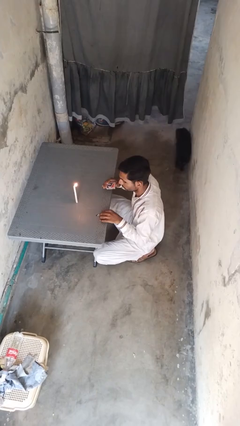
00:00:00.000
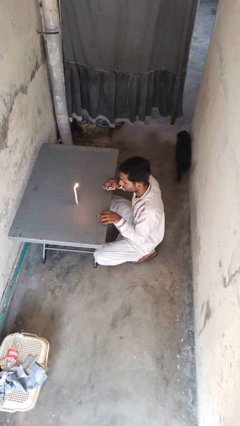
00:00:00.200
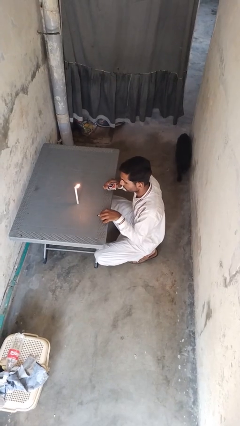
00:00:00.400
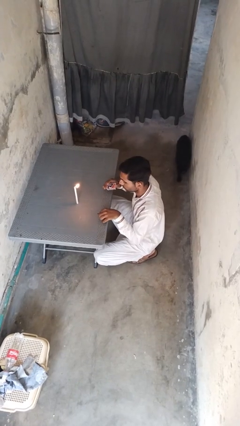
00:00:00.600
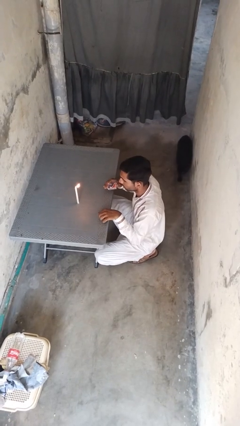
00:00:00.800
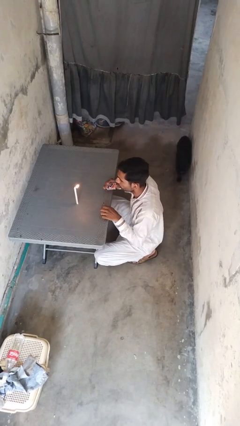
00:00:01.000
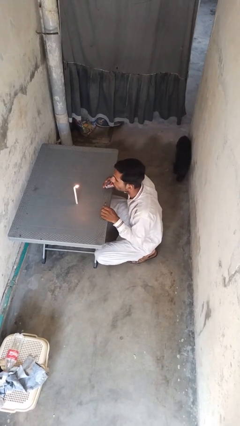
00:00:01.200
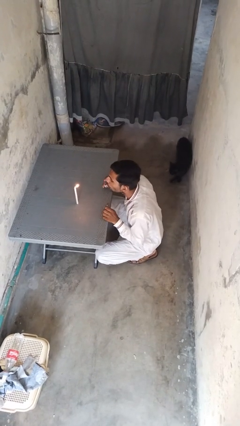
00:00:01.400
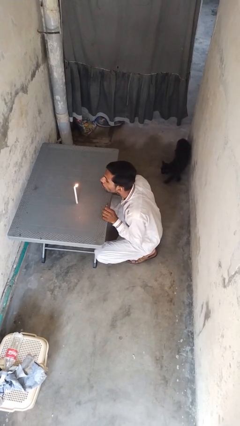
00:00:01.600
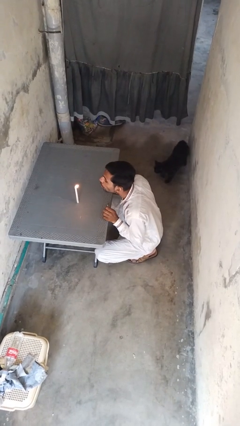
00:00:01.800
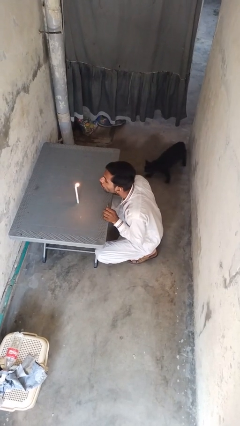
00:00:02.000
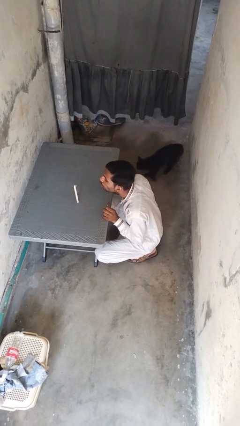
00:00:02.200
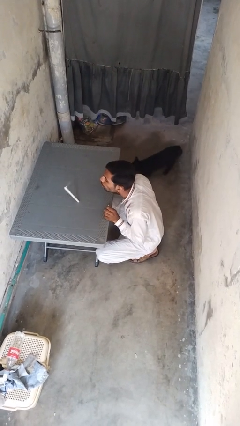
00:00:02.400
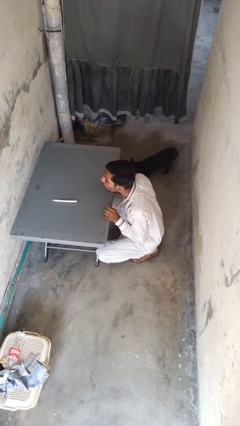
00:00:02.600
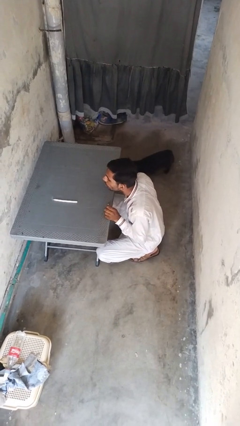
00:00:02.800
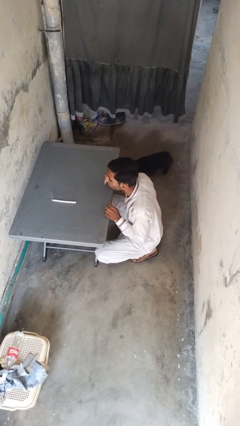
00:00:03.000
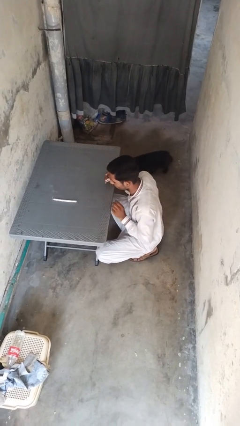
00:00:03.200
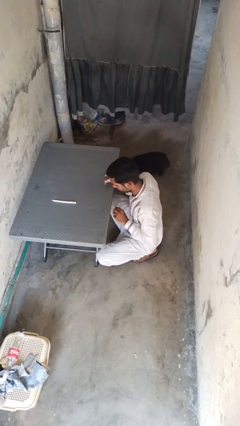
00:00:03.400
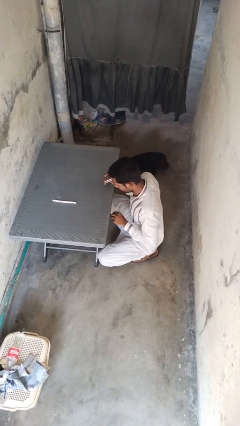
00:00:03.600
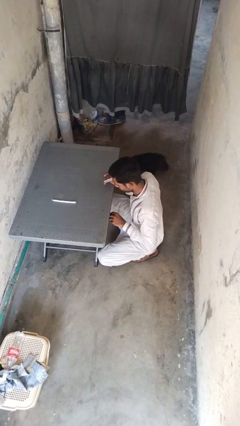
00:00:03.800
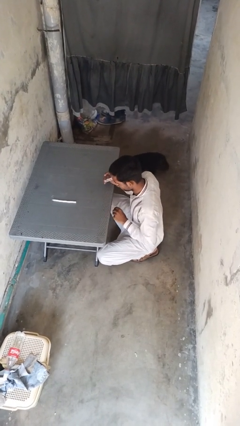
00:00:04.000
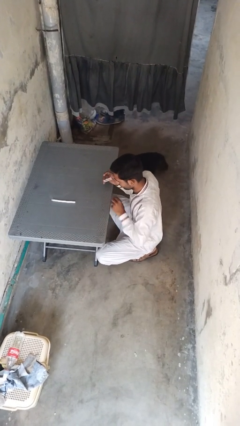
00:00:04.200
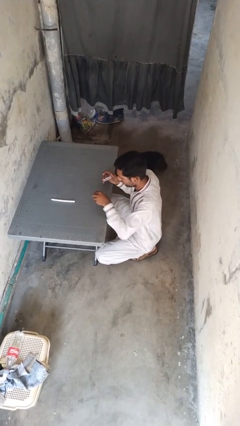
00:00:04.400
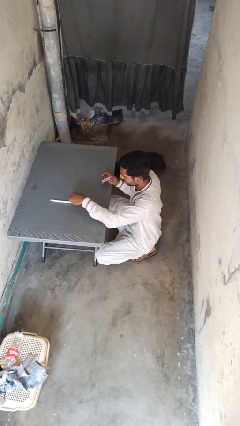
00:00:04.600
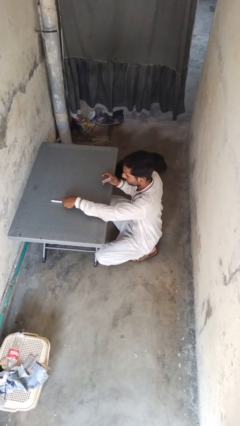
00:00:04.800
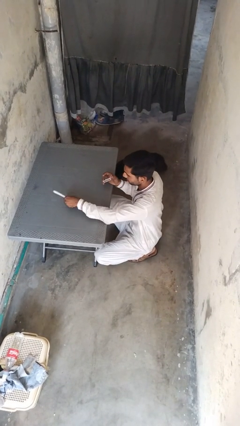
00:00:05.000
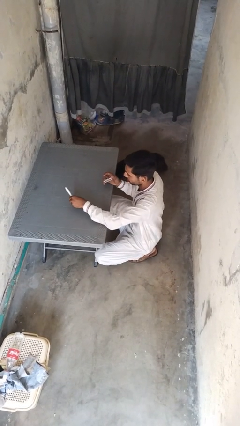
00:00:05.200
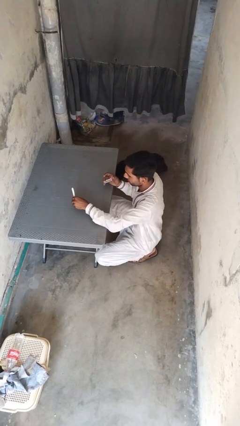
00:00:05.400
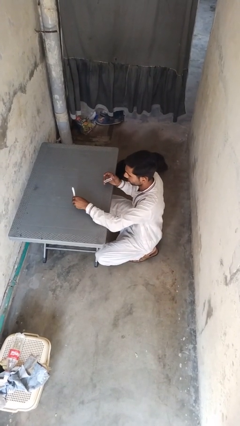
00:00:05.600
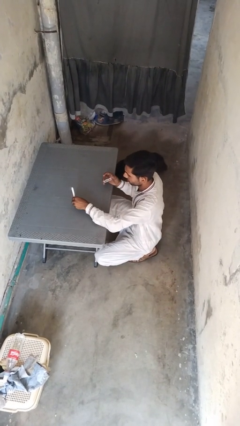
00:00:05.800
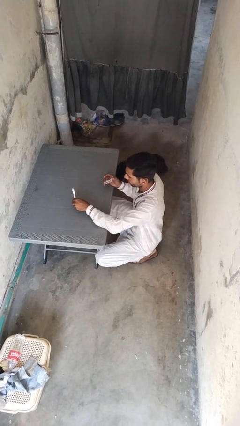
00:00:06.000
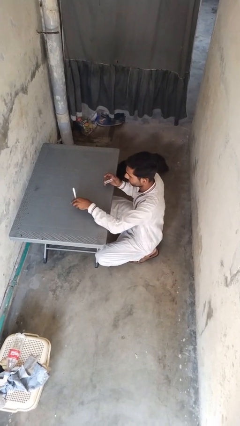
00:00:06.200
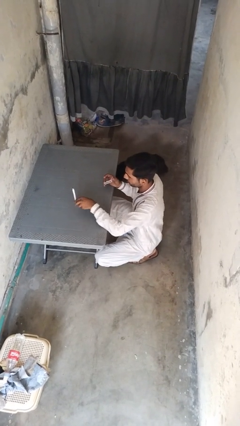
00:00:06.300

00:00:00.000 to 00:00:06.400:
person extinguishes candle

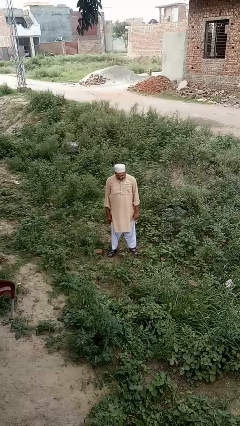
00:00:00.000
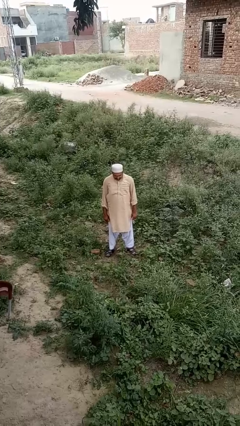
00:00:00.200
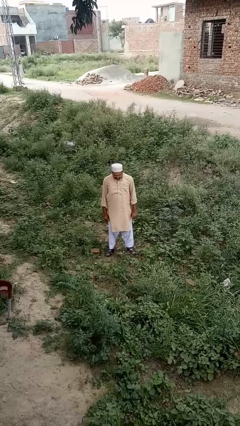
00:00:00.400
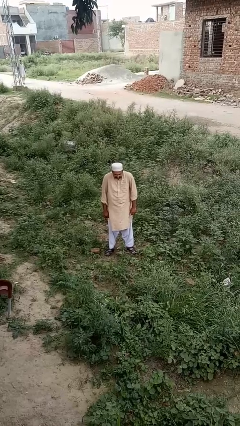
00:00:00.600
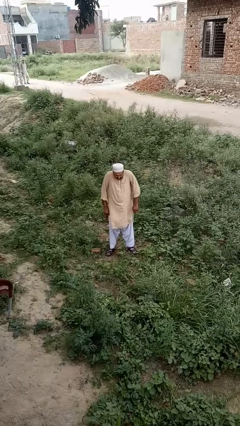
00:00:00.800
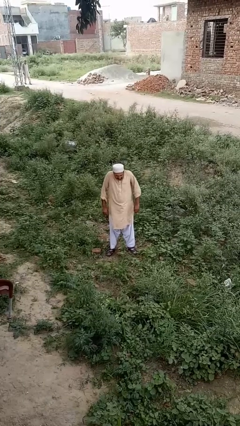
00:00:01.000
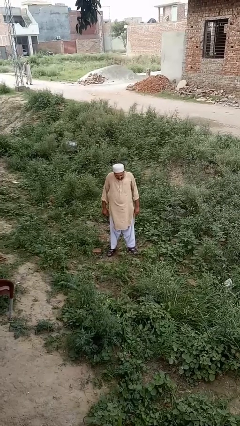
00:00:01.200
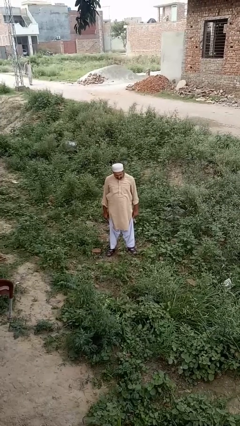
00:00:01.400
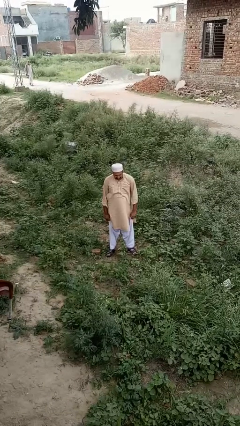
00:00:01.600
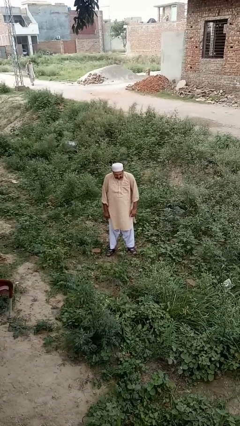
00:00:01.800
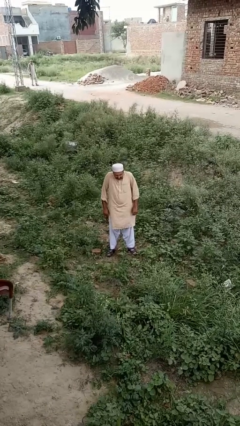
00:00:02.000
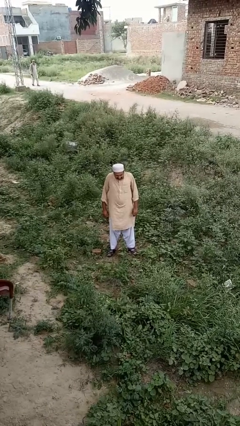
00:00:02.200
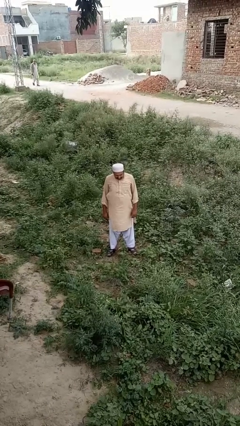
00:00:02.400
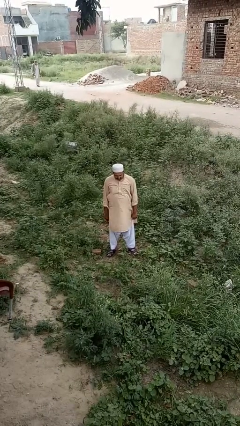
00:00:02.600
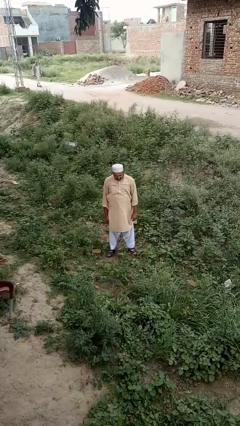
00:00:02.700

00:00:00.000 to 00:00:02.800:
person shrugs

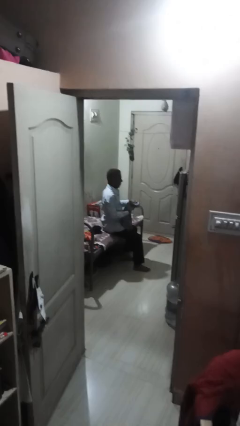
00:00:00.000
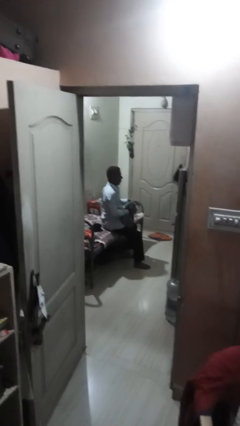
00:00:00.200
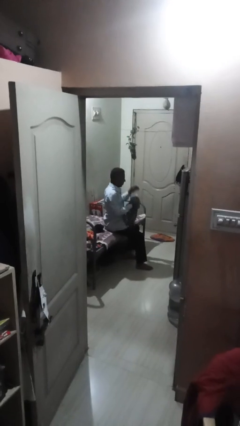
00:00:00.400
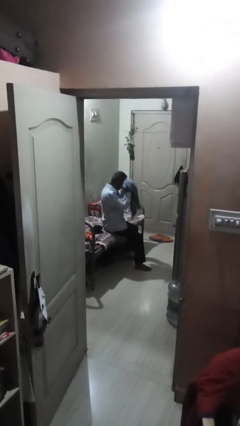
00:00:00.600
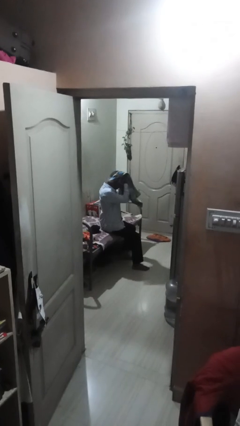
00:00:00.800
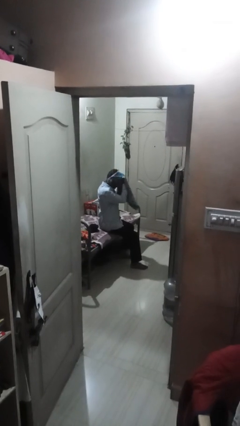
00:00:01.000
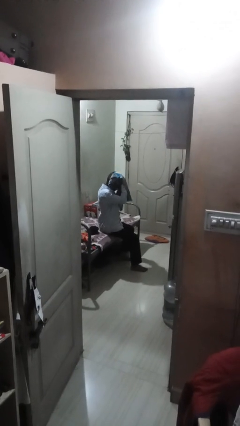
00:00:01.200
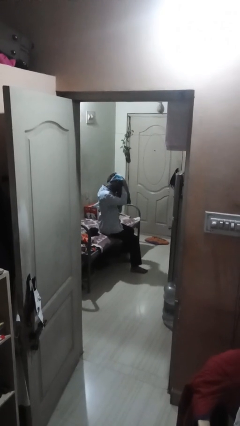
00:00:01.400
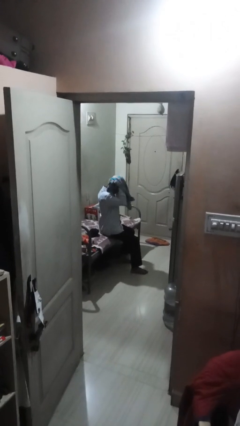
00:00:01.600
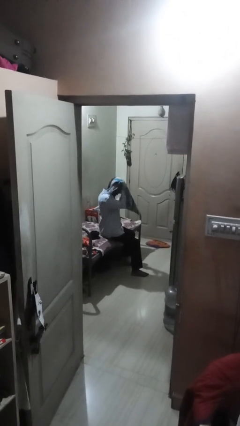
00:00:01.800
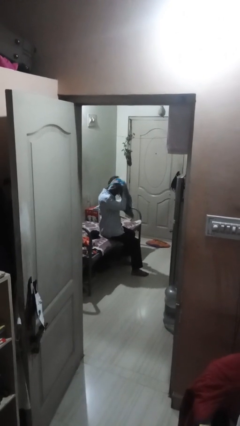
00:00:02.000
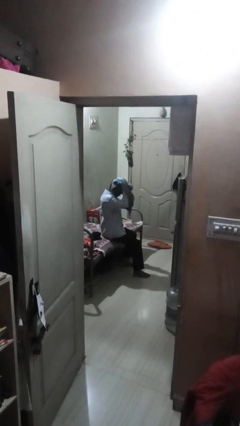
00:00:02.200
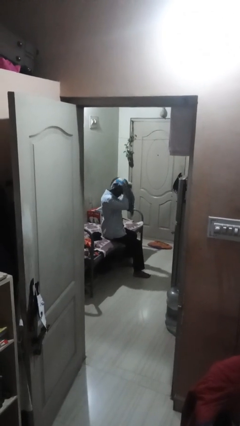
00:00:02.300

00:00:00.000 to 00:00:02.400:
person gestures listen closely

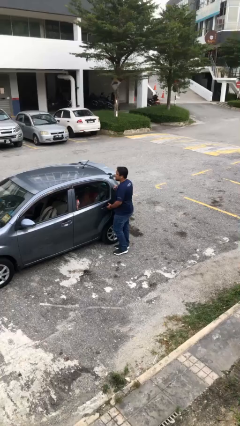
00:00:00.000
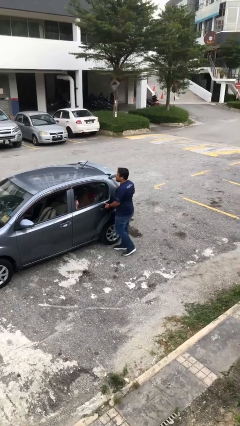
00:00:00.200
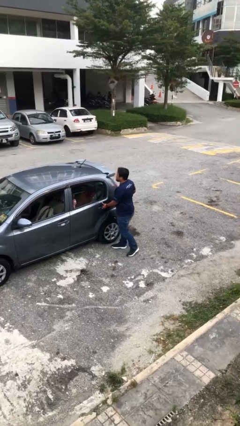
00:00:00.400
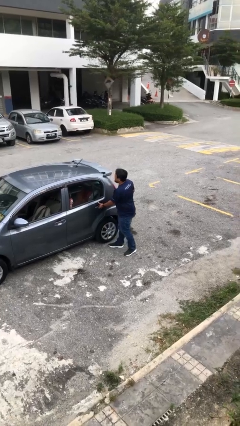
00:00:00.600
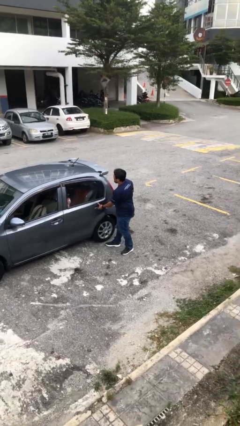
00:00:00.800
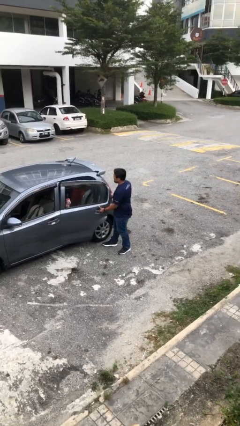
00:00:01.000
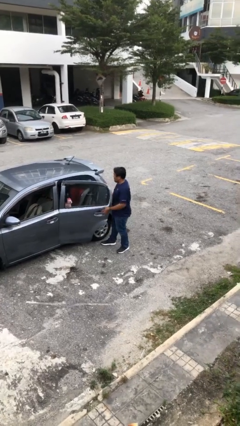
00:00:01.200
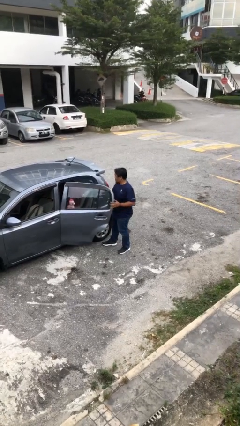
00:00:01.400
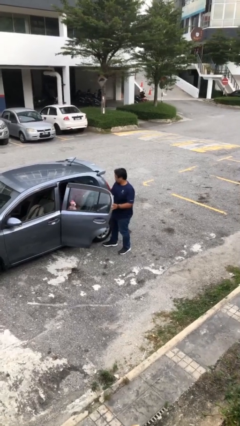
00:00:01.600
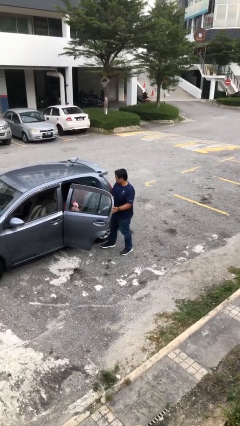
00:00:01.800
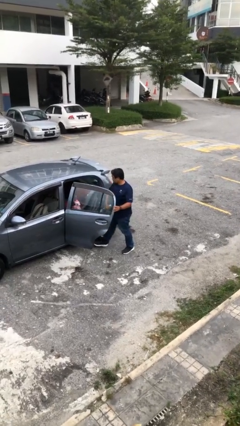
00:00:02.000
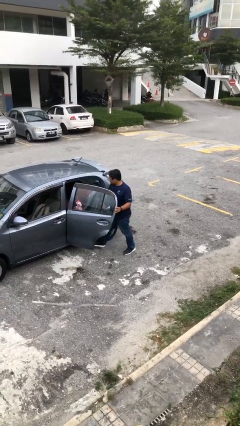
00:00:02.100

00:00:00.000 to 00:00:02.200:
person opens car door

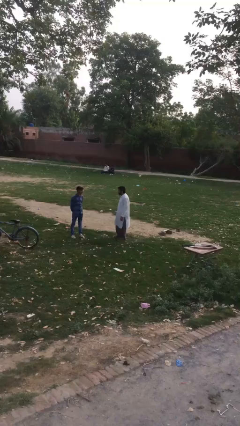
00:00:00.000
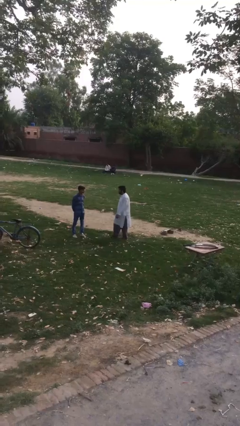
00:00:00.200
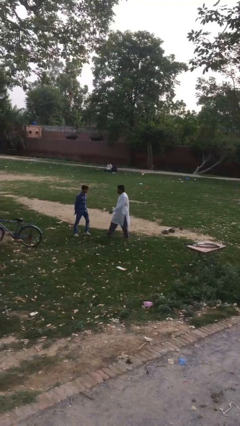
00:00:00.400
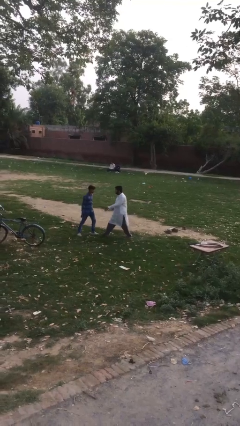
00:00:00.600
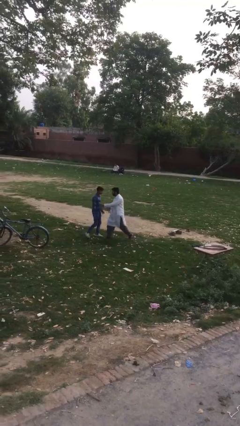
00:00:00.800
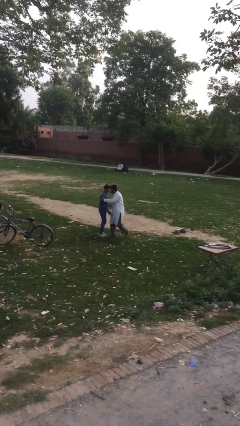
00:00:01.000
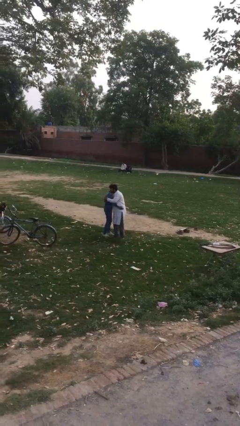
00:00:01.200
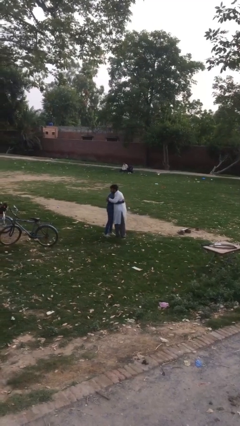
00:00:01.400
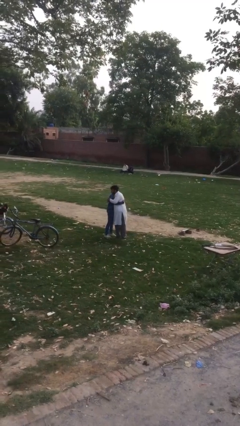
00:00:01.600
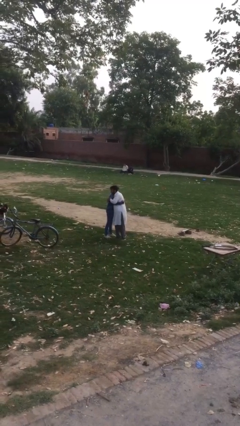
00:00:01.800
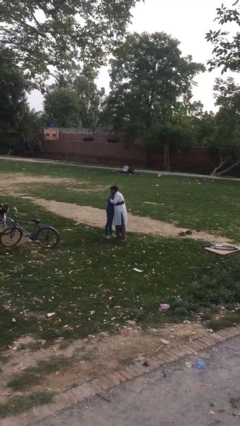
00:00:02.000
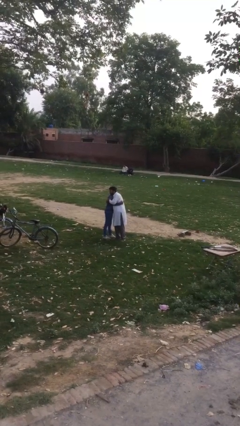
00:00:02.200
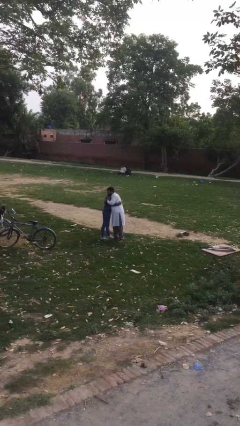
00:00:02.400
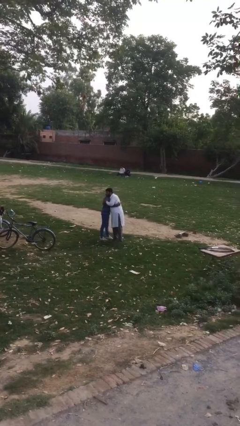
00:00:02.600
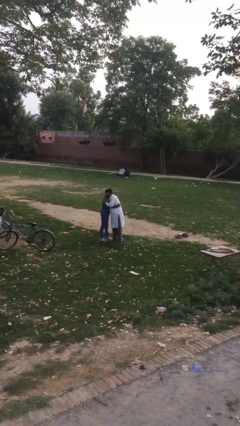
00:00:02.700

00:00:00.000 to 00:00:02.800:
person embraces person

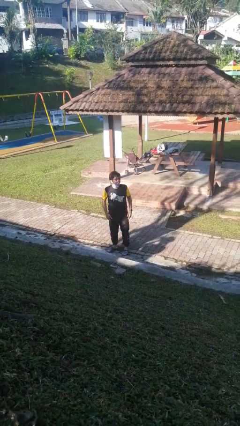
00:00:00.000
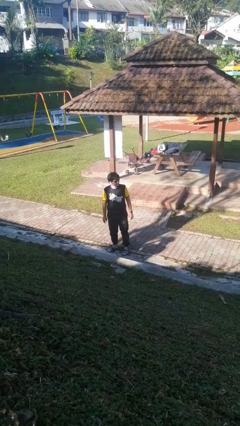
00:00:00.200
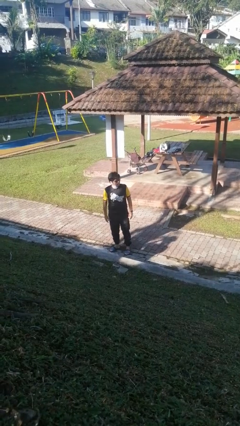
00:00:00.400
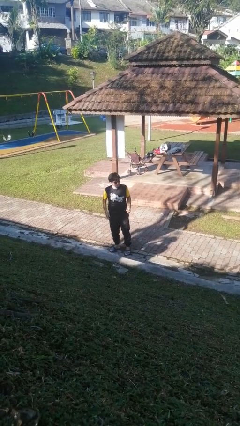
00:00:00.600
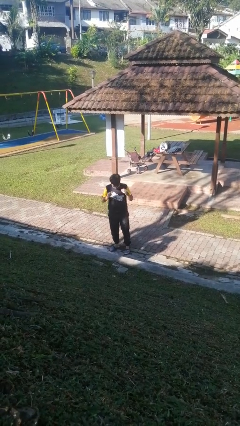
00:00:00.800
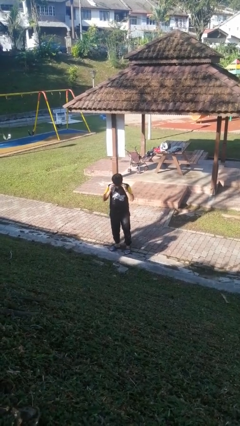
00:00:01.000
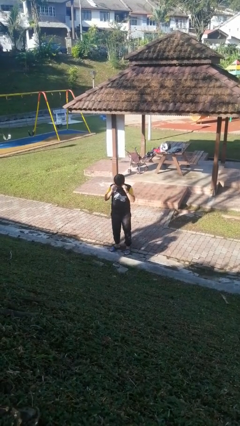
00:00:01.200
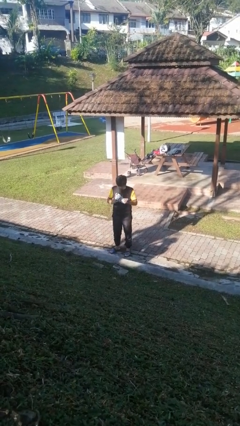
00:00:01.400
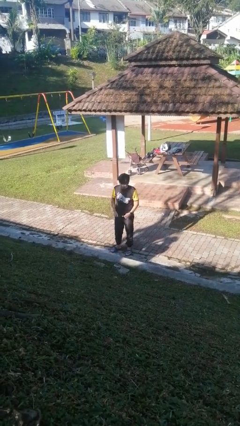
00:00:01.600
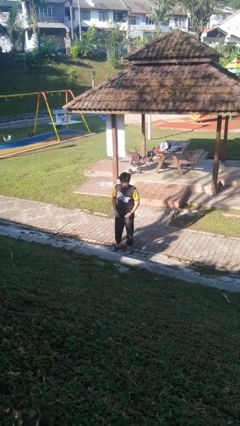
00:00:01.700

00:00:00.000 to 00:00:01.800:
person takes off sunglasses
